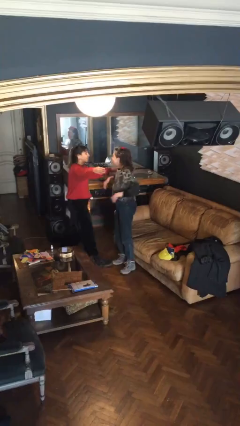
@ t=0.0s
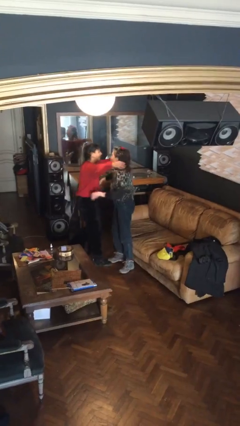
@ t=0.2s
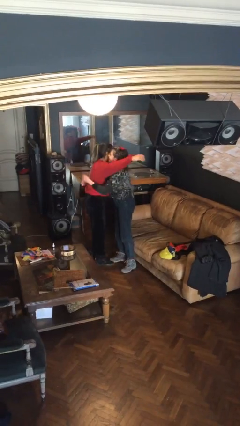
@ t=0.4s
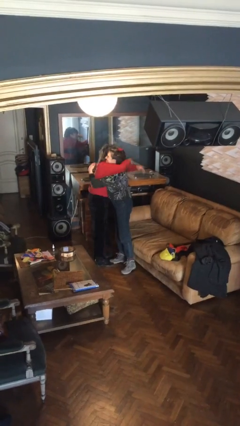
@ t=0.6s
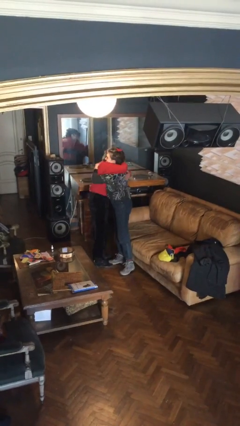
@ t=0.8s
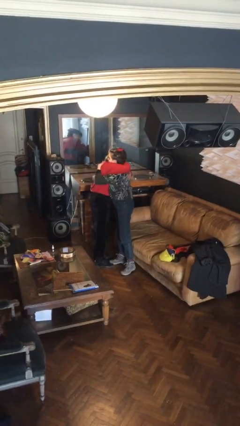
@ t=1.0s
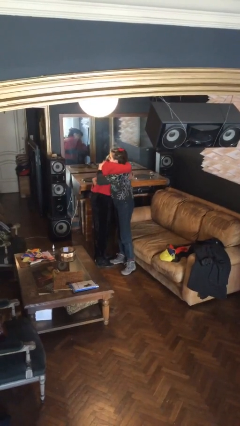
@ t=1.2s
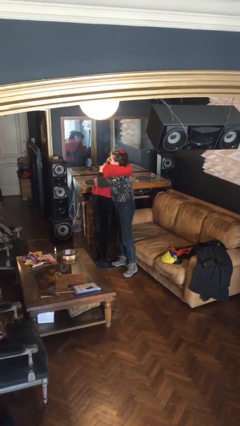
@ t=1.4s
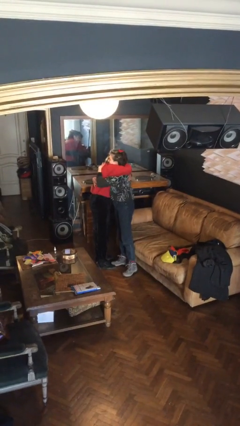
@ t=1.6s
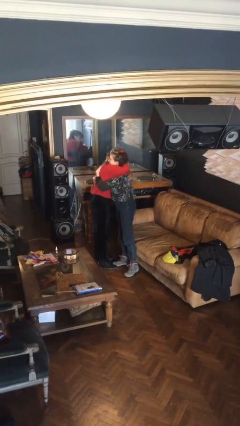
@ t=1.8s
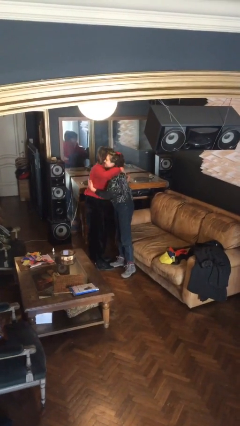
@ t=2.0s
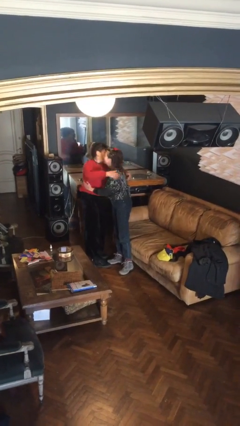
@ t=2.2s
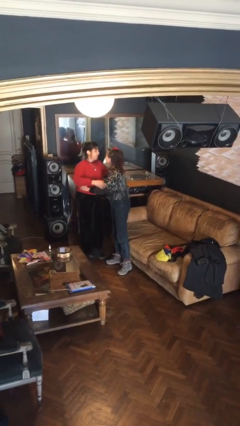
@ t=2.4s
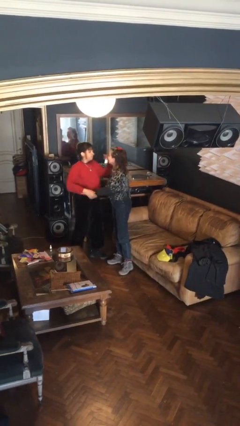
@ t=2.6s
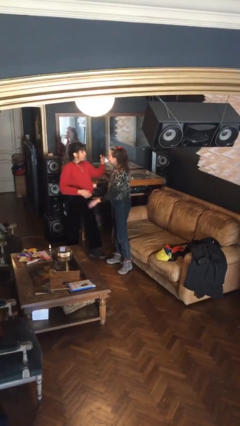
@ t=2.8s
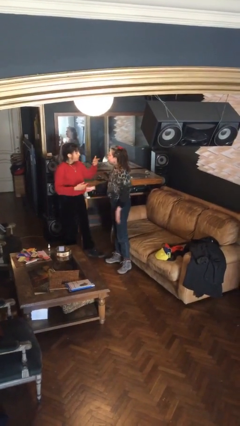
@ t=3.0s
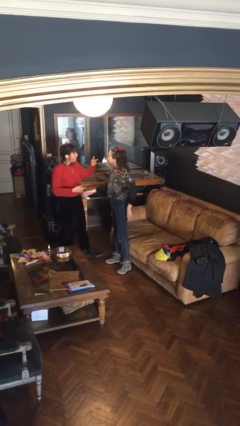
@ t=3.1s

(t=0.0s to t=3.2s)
person embraces person

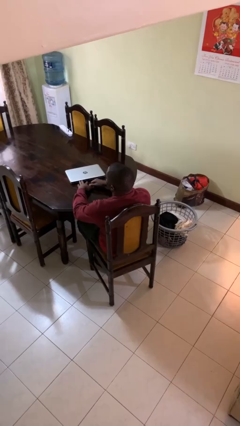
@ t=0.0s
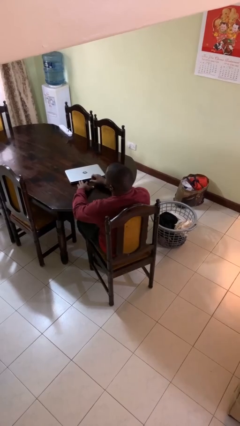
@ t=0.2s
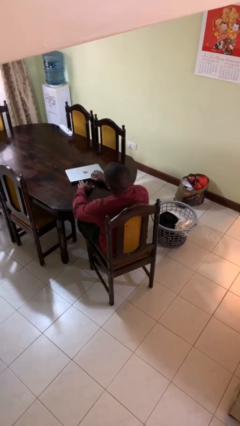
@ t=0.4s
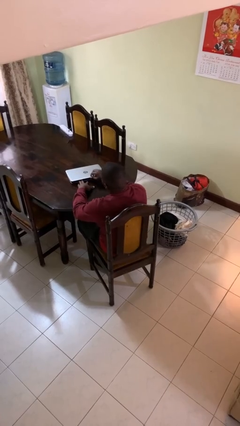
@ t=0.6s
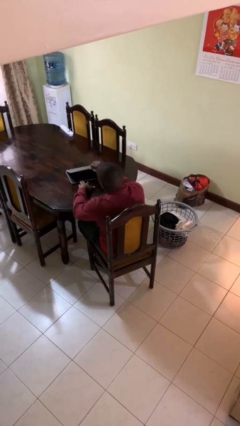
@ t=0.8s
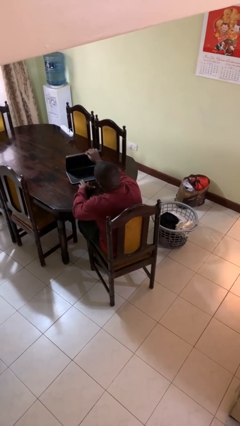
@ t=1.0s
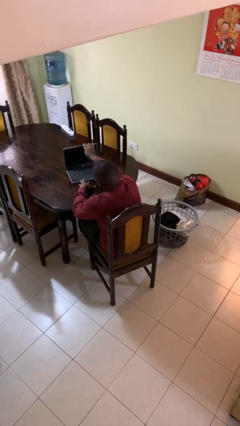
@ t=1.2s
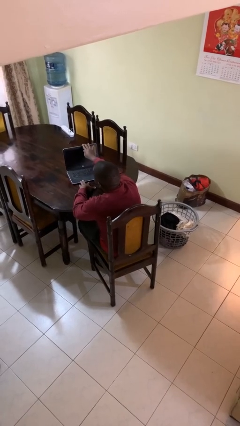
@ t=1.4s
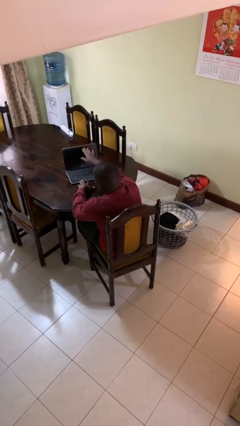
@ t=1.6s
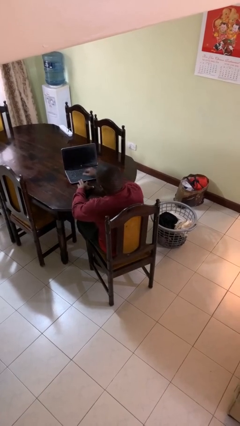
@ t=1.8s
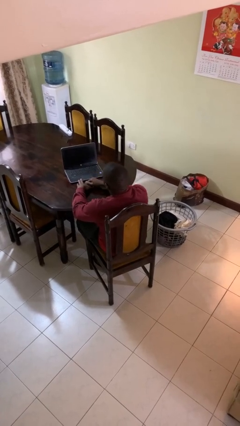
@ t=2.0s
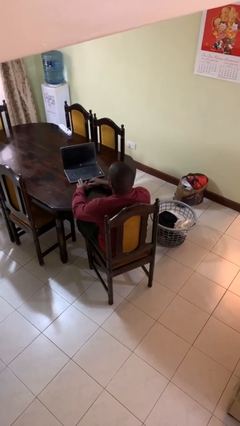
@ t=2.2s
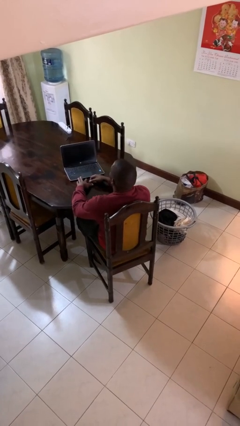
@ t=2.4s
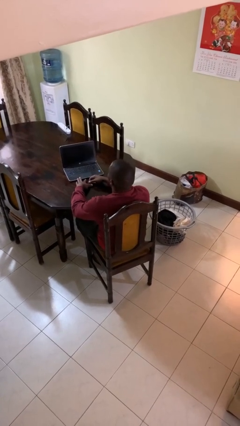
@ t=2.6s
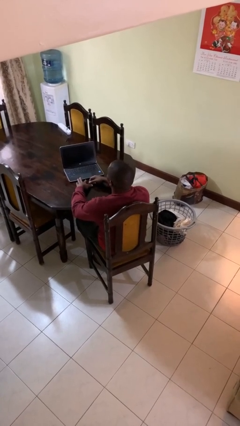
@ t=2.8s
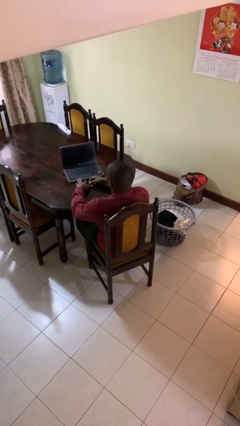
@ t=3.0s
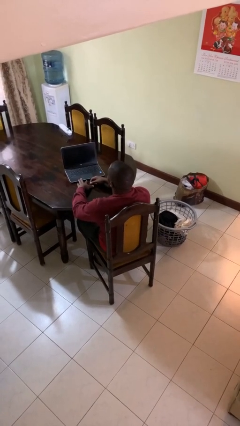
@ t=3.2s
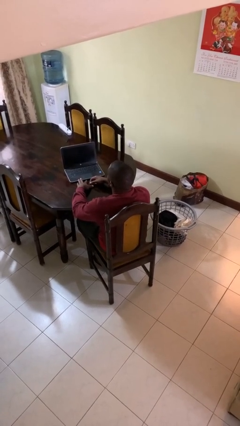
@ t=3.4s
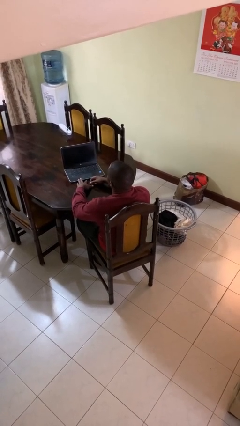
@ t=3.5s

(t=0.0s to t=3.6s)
person opens laptop

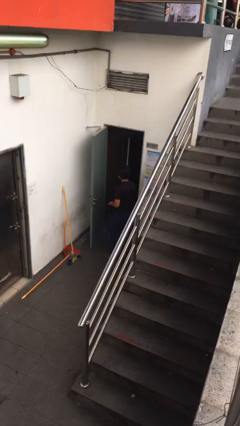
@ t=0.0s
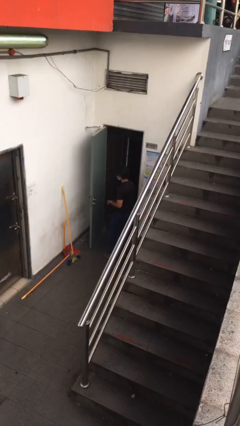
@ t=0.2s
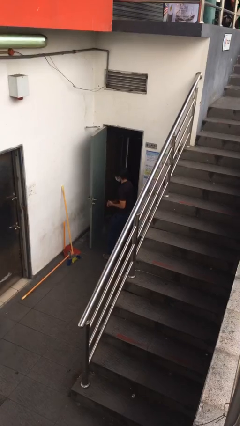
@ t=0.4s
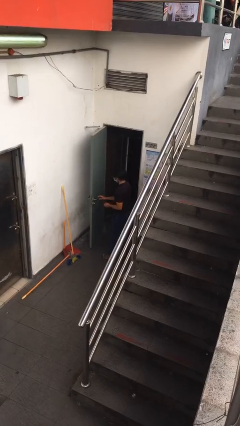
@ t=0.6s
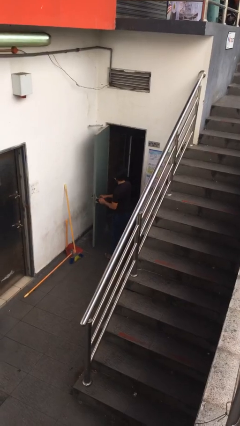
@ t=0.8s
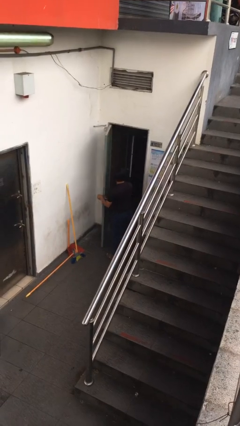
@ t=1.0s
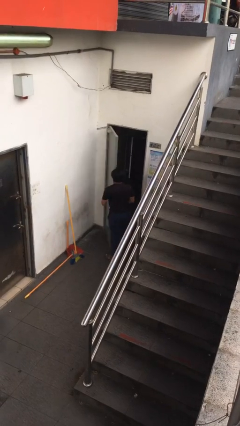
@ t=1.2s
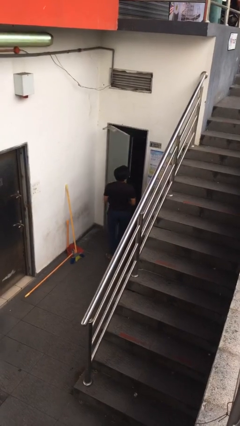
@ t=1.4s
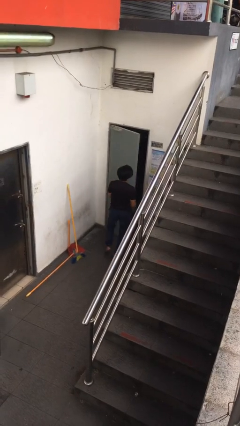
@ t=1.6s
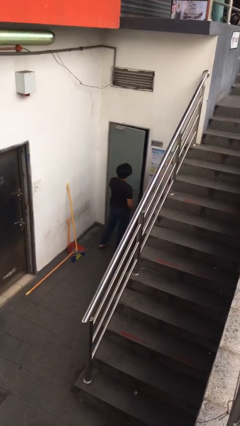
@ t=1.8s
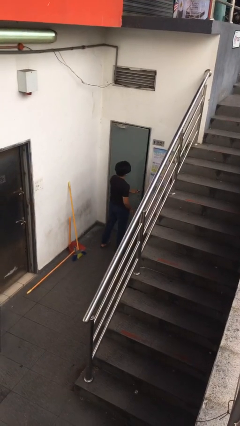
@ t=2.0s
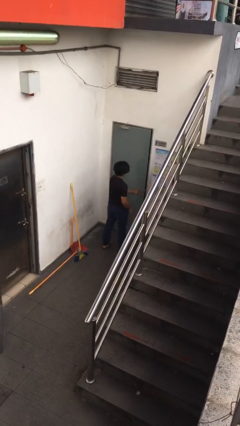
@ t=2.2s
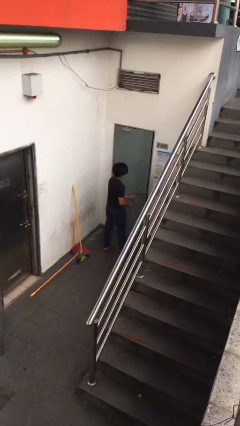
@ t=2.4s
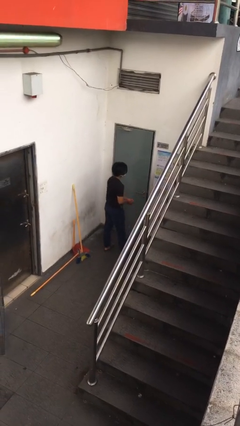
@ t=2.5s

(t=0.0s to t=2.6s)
person closes facility door

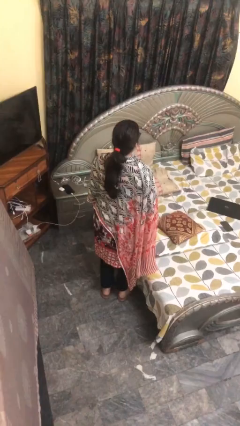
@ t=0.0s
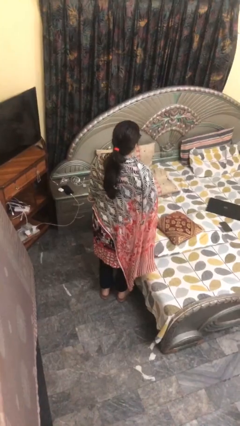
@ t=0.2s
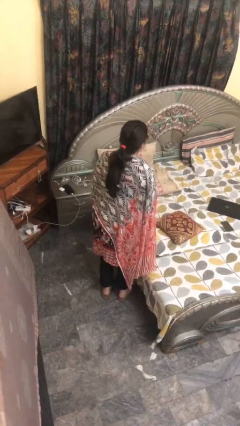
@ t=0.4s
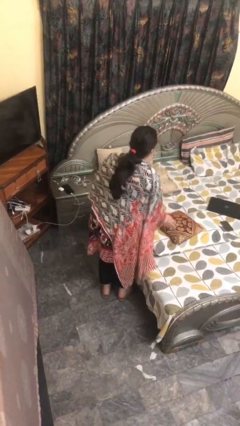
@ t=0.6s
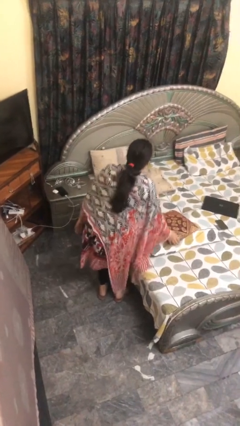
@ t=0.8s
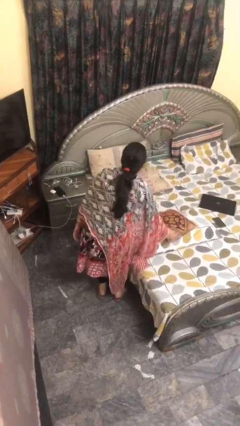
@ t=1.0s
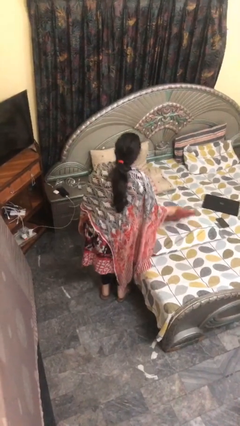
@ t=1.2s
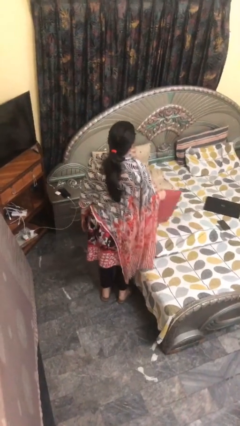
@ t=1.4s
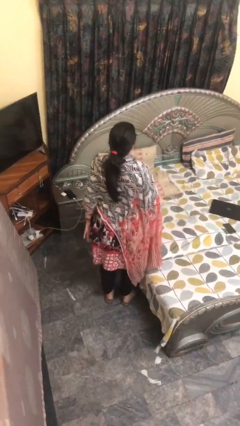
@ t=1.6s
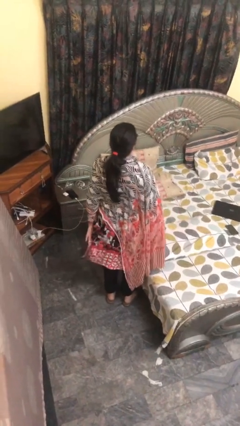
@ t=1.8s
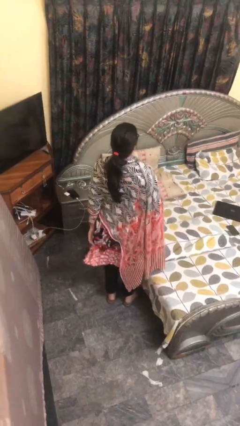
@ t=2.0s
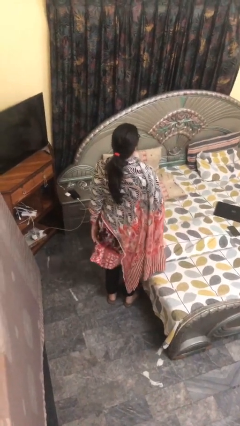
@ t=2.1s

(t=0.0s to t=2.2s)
person picks up object from bed

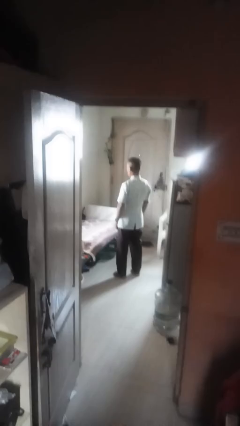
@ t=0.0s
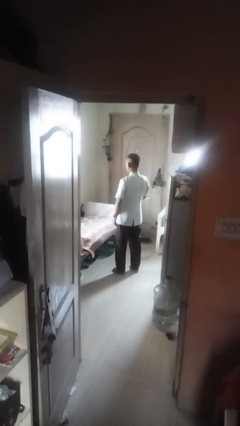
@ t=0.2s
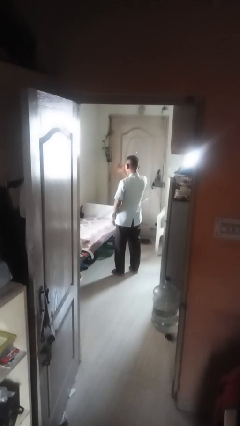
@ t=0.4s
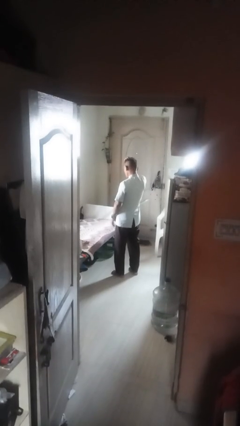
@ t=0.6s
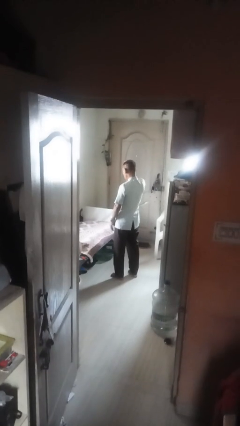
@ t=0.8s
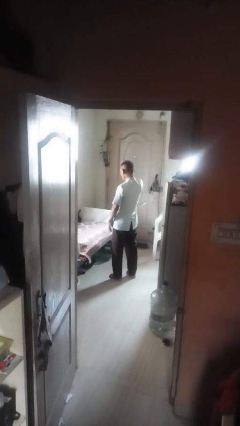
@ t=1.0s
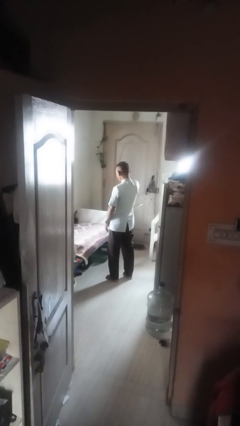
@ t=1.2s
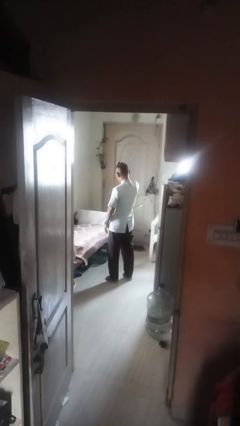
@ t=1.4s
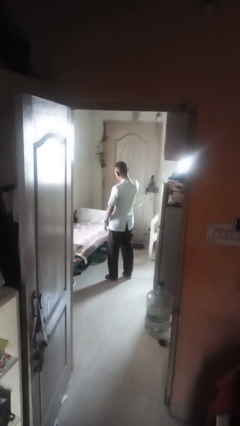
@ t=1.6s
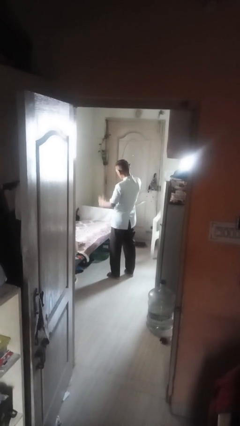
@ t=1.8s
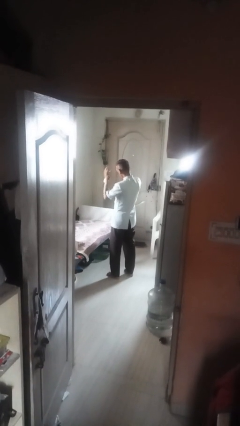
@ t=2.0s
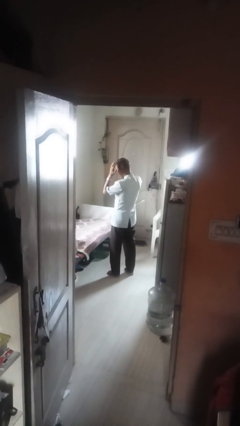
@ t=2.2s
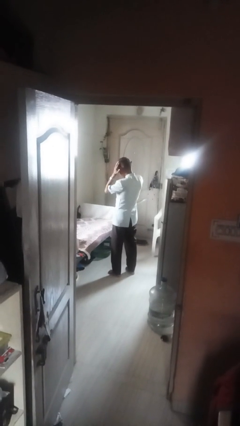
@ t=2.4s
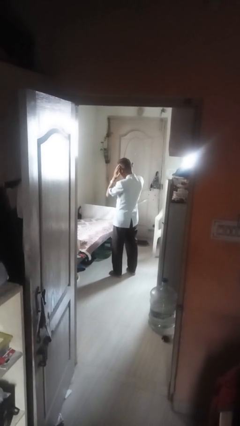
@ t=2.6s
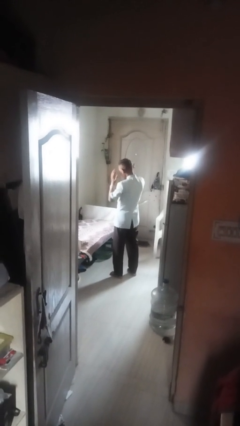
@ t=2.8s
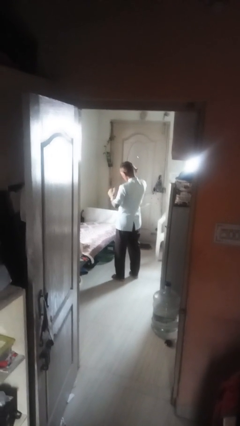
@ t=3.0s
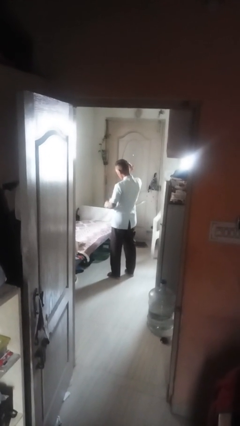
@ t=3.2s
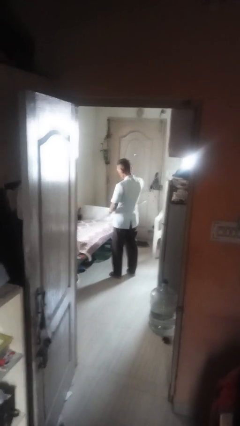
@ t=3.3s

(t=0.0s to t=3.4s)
person strokes hair

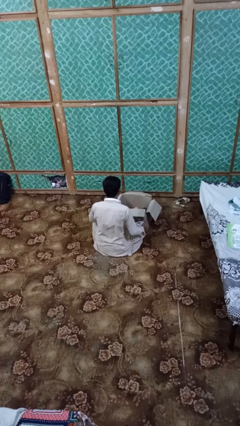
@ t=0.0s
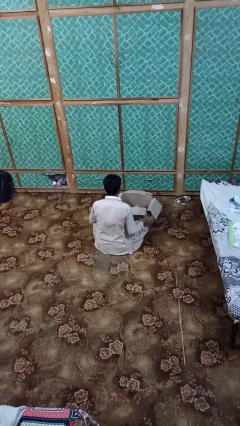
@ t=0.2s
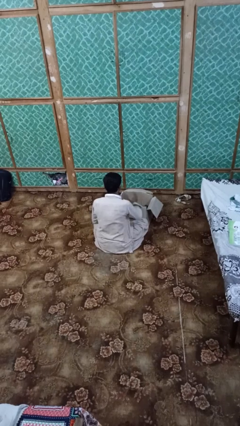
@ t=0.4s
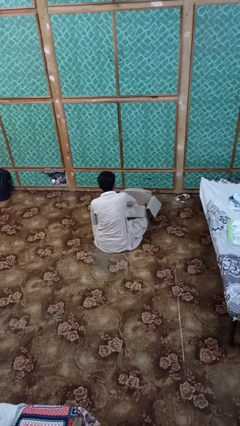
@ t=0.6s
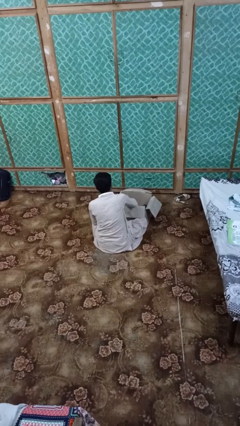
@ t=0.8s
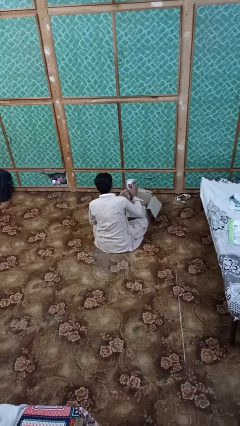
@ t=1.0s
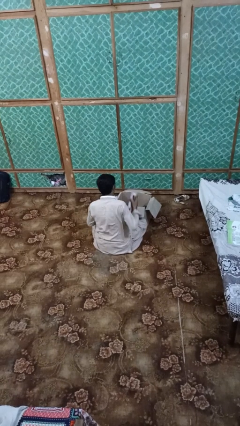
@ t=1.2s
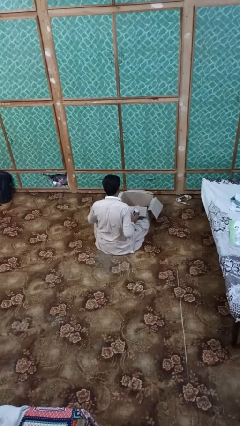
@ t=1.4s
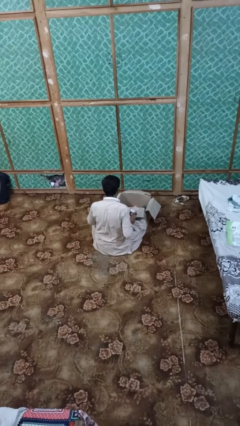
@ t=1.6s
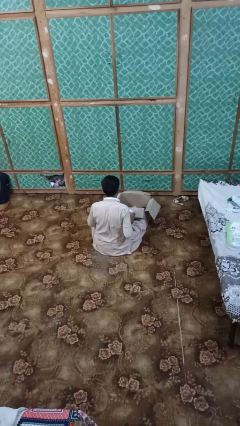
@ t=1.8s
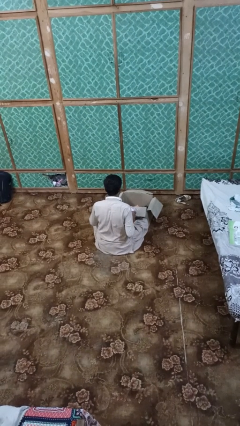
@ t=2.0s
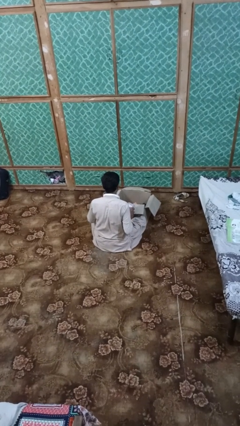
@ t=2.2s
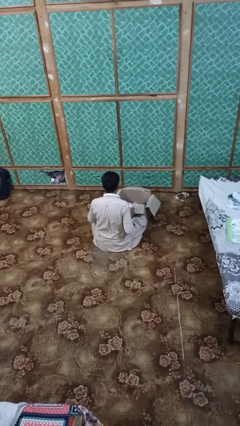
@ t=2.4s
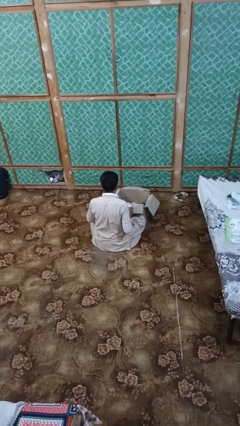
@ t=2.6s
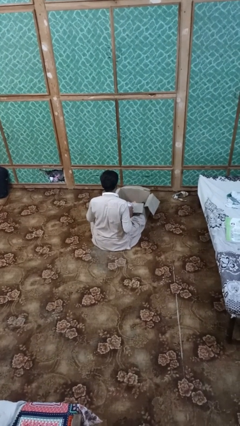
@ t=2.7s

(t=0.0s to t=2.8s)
person takes object from box
